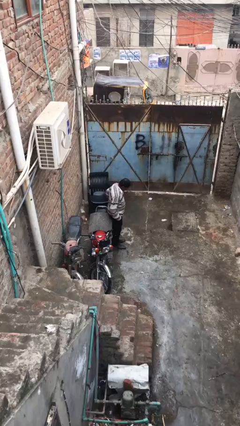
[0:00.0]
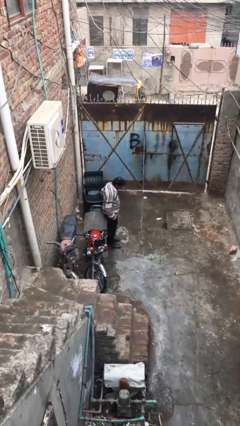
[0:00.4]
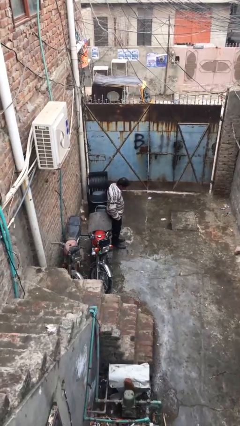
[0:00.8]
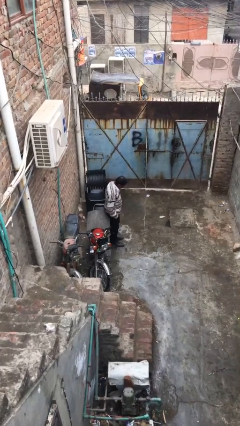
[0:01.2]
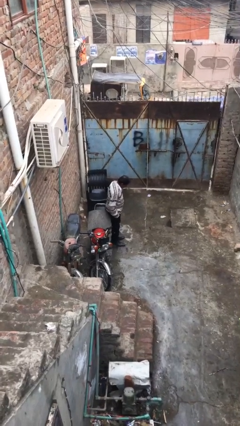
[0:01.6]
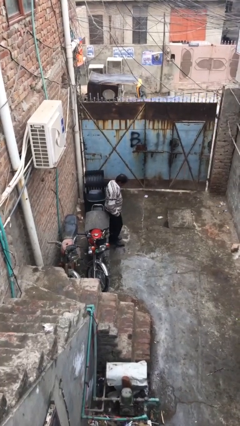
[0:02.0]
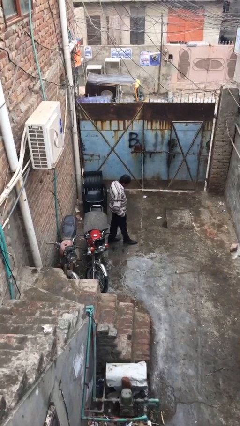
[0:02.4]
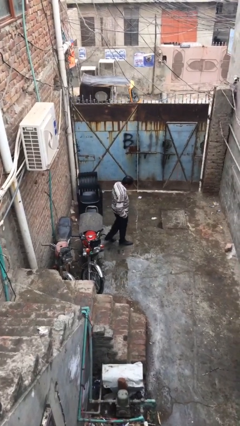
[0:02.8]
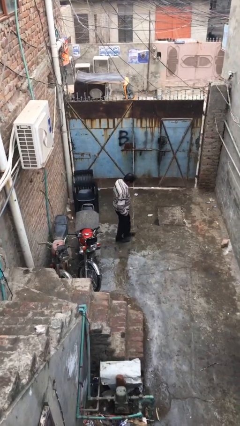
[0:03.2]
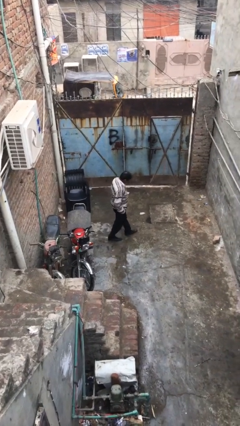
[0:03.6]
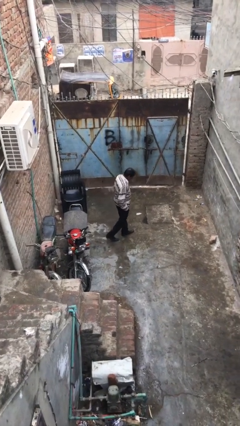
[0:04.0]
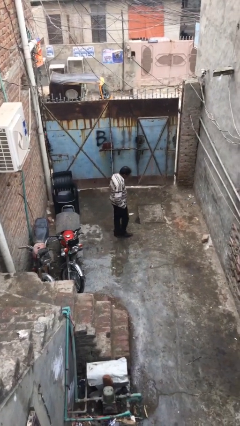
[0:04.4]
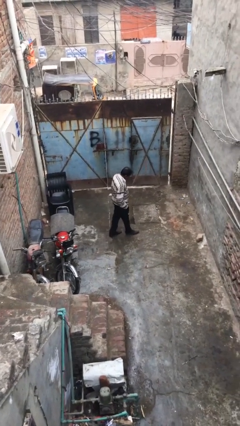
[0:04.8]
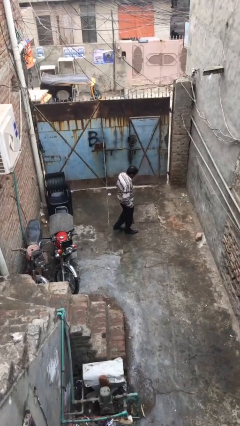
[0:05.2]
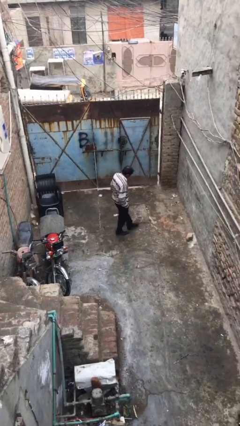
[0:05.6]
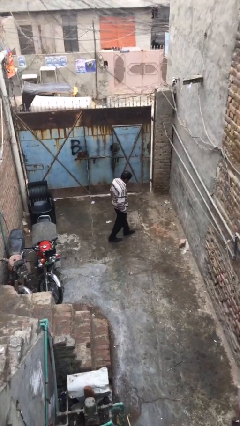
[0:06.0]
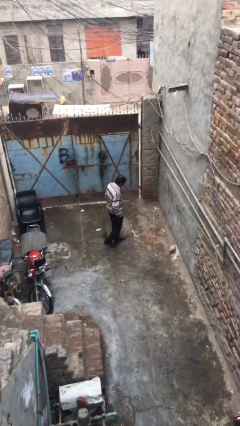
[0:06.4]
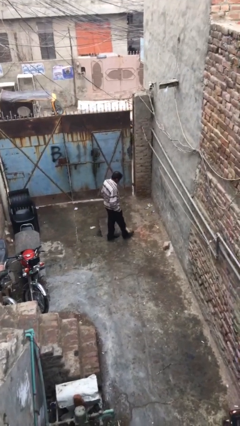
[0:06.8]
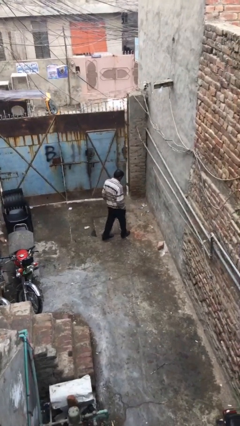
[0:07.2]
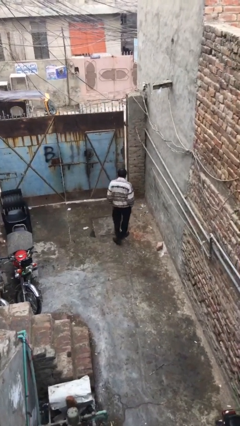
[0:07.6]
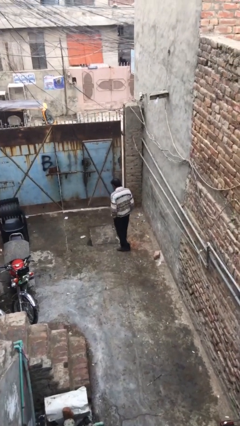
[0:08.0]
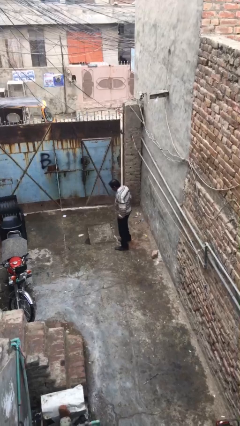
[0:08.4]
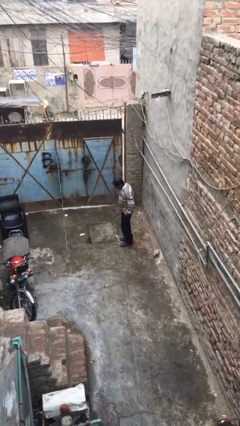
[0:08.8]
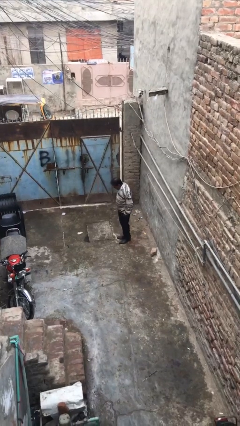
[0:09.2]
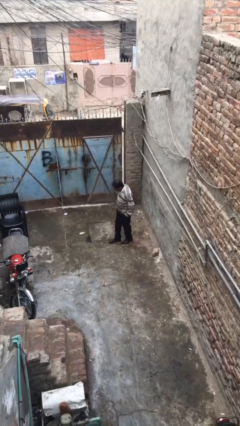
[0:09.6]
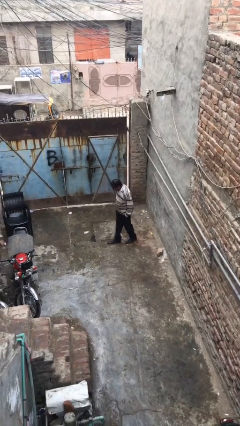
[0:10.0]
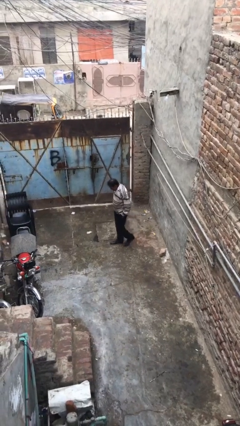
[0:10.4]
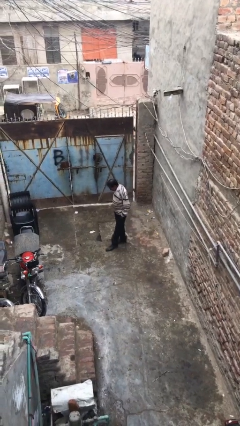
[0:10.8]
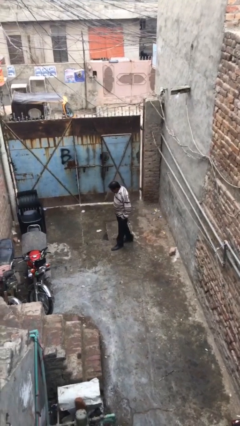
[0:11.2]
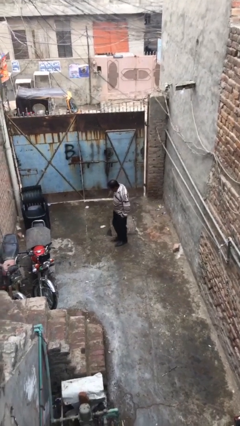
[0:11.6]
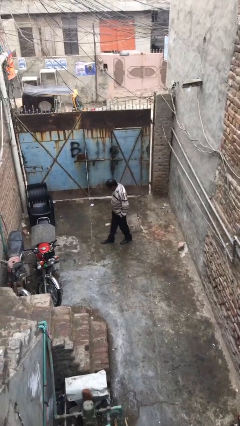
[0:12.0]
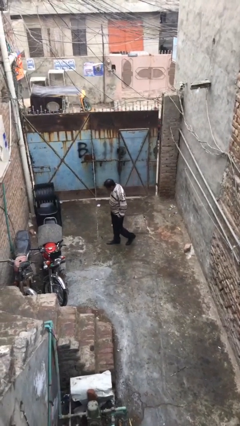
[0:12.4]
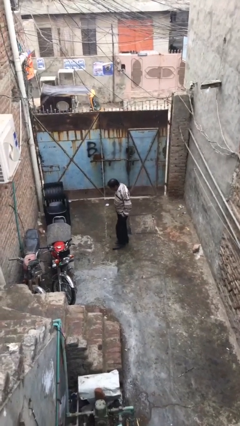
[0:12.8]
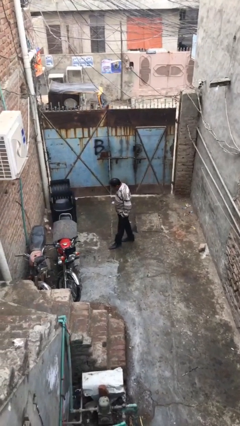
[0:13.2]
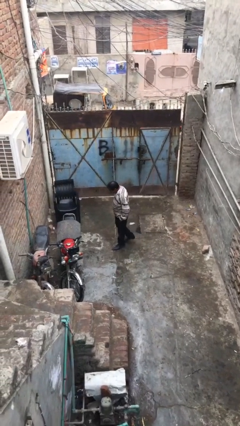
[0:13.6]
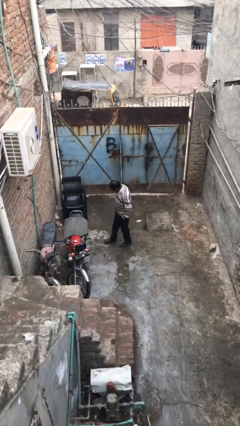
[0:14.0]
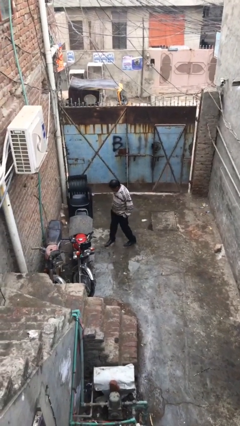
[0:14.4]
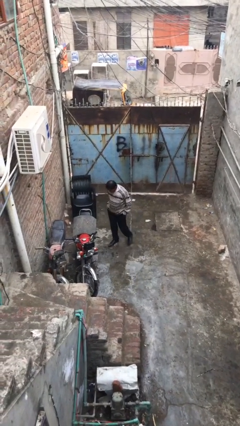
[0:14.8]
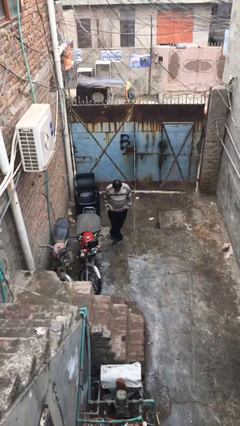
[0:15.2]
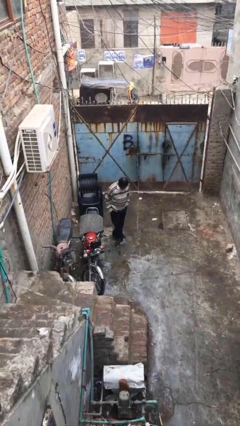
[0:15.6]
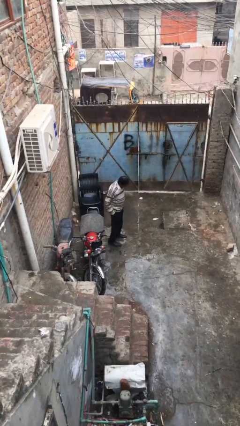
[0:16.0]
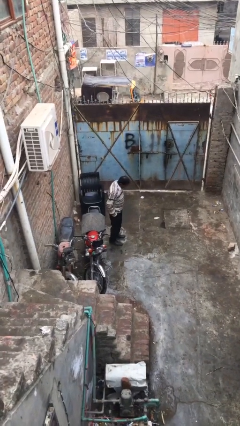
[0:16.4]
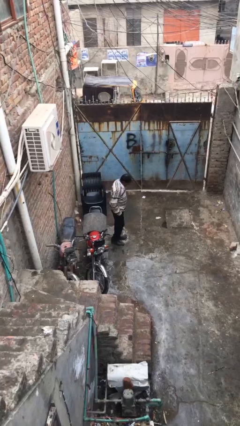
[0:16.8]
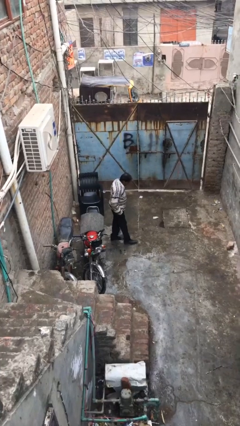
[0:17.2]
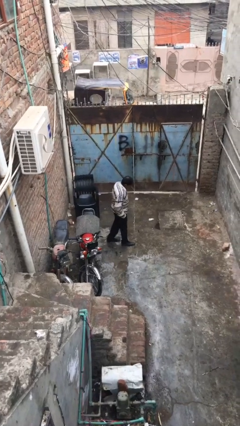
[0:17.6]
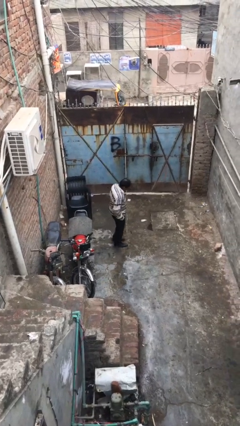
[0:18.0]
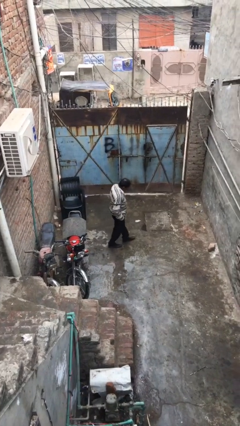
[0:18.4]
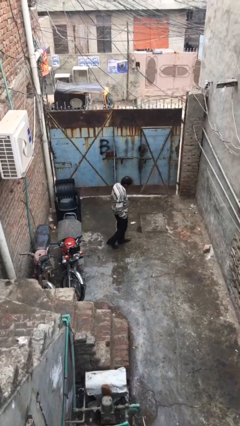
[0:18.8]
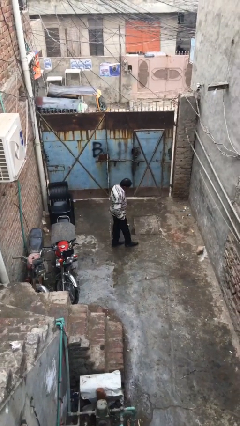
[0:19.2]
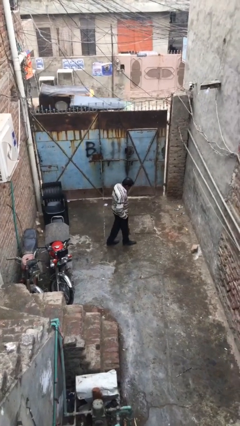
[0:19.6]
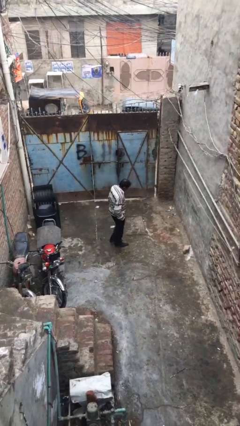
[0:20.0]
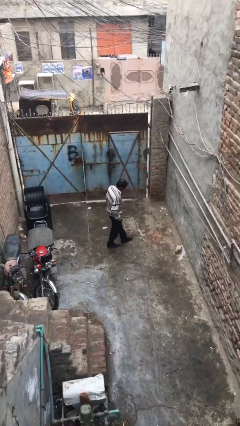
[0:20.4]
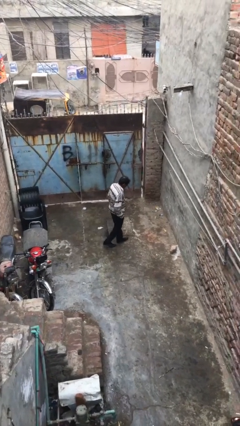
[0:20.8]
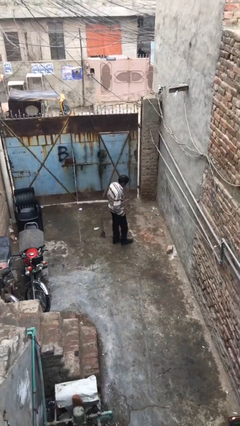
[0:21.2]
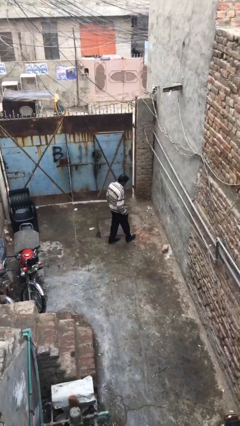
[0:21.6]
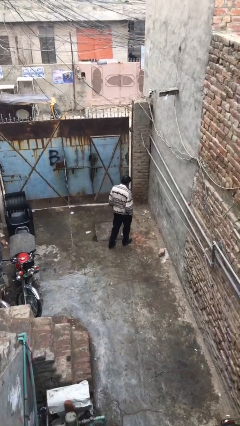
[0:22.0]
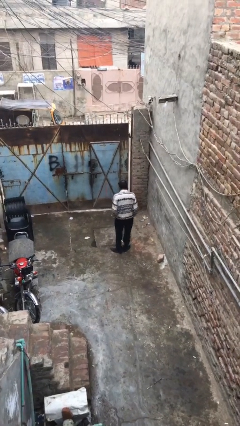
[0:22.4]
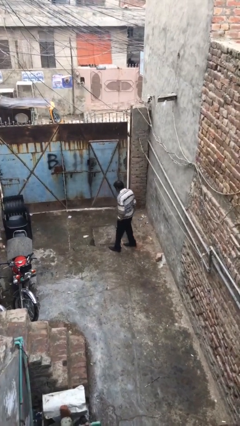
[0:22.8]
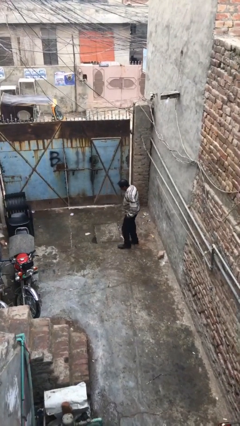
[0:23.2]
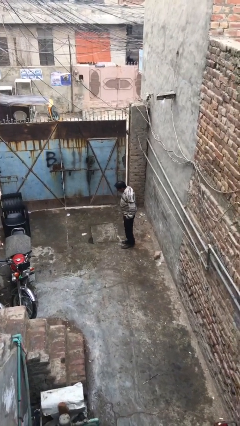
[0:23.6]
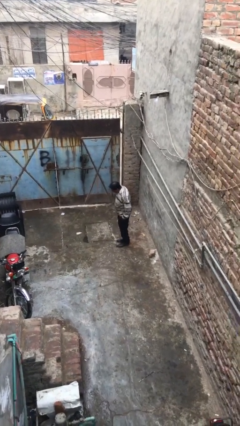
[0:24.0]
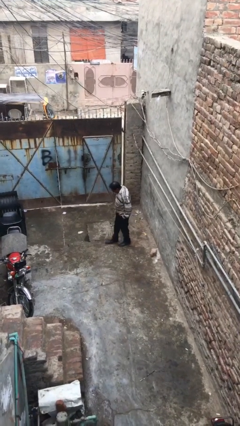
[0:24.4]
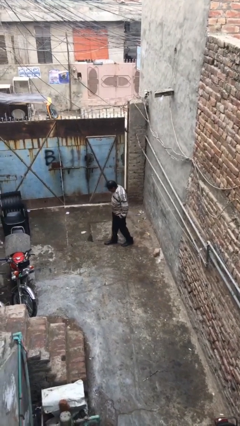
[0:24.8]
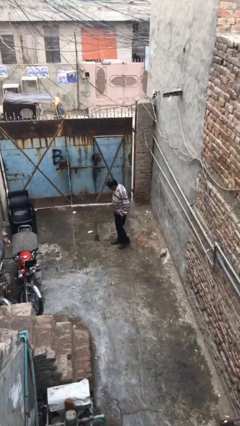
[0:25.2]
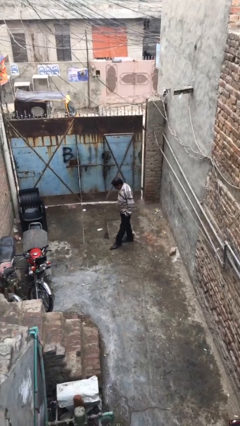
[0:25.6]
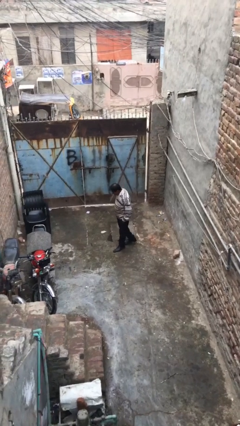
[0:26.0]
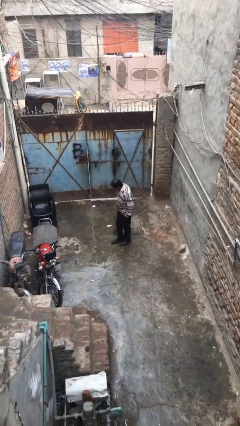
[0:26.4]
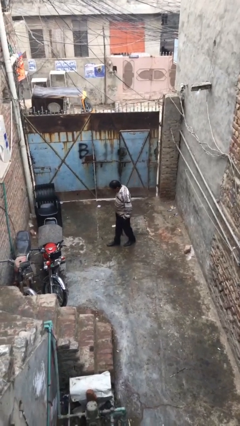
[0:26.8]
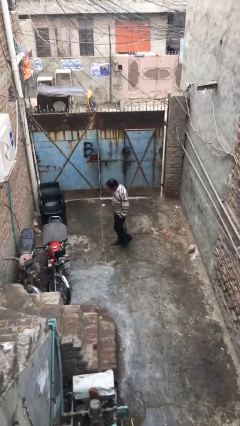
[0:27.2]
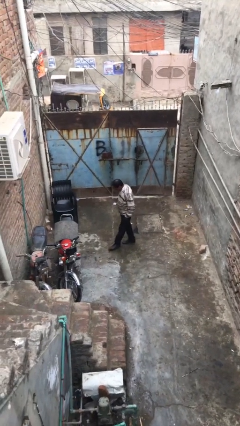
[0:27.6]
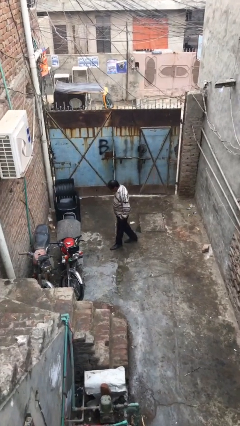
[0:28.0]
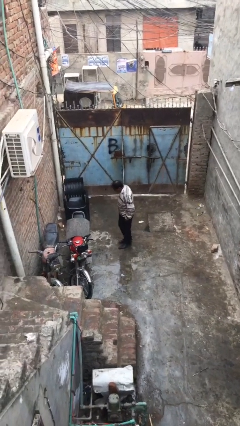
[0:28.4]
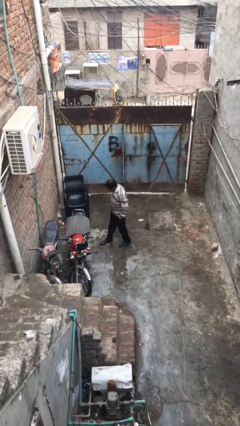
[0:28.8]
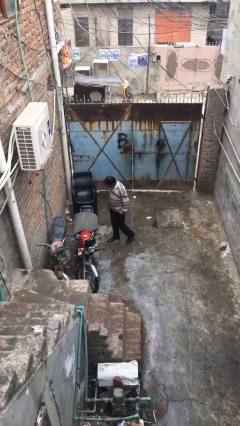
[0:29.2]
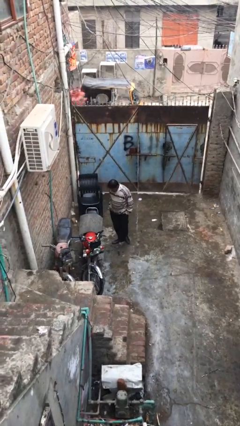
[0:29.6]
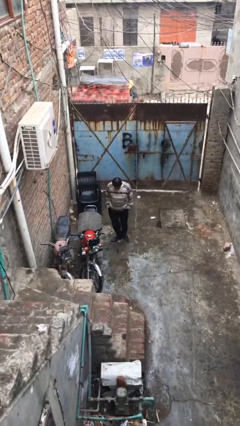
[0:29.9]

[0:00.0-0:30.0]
person walks

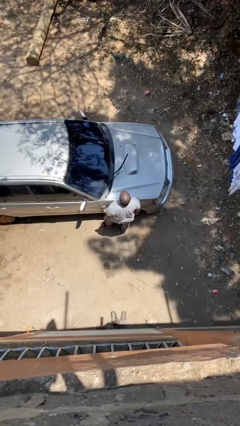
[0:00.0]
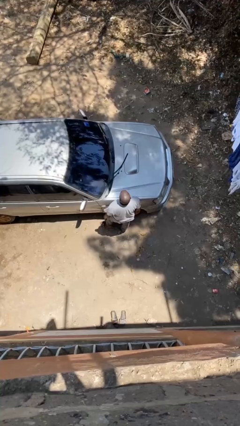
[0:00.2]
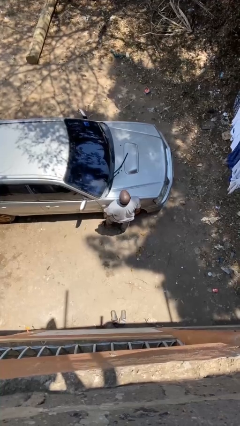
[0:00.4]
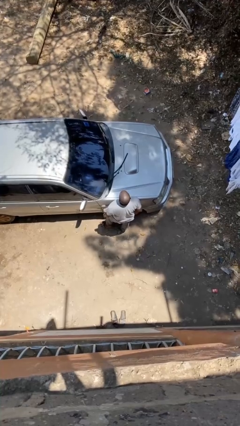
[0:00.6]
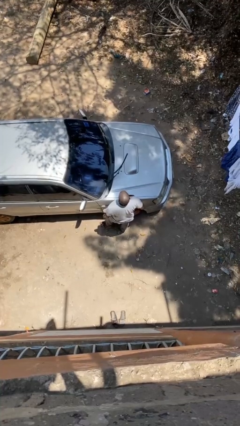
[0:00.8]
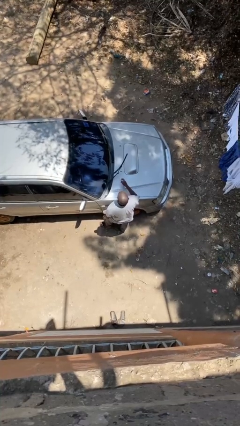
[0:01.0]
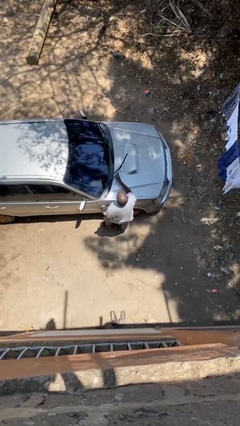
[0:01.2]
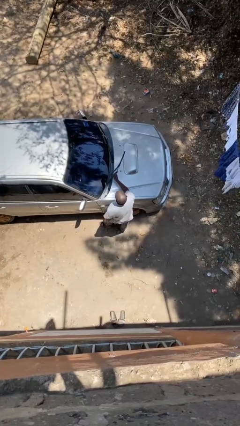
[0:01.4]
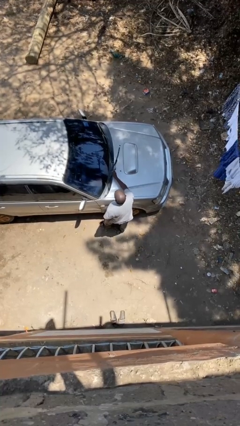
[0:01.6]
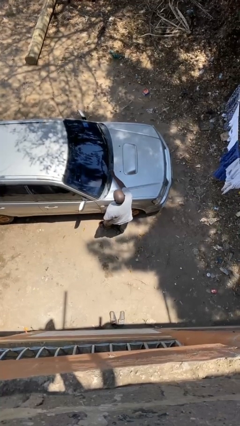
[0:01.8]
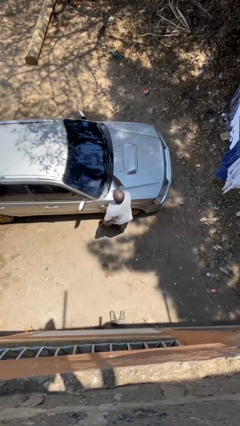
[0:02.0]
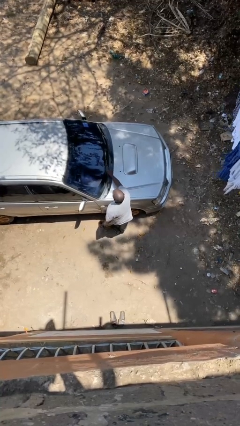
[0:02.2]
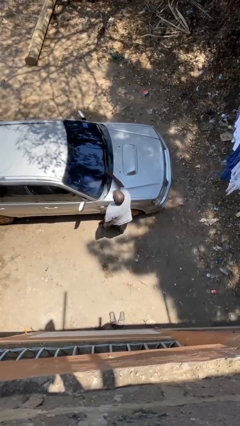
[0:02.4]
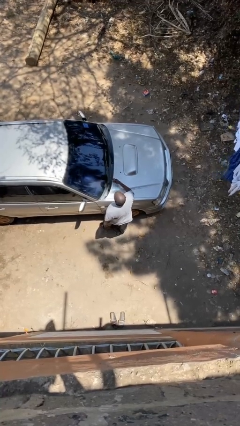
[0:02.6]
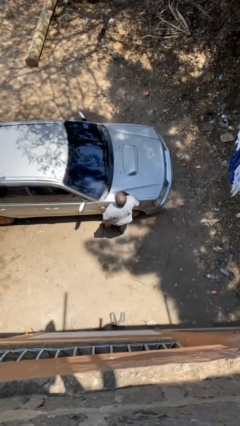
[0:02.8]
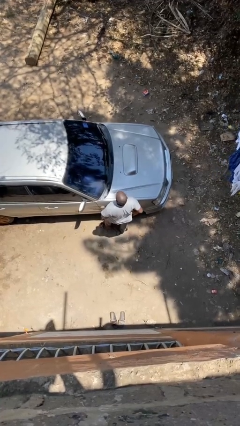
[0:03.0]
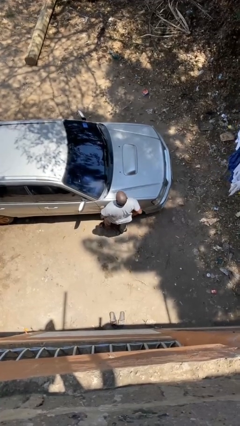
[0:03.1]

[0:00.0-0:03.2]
person flips down car wipers
